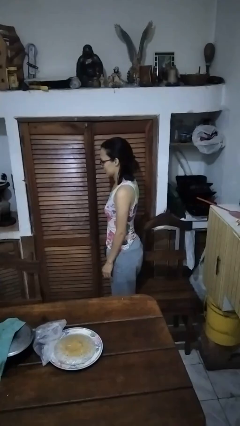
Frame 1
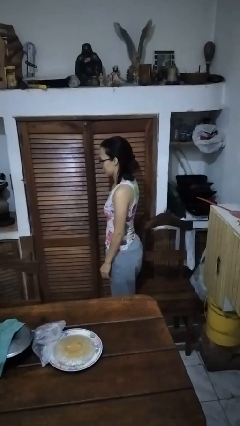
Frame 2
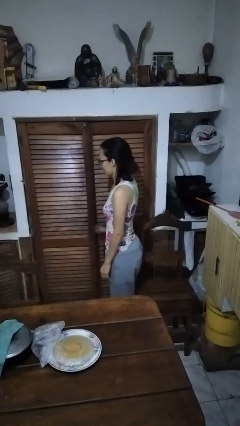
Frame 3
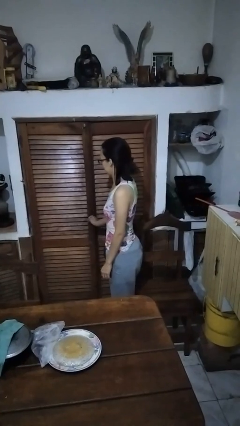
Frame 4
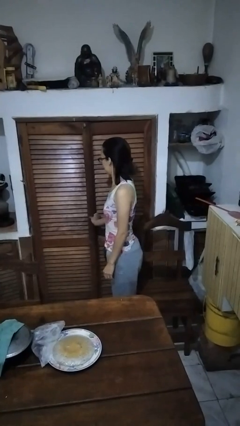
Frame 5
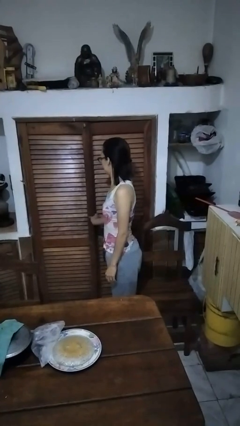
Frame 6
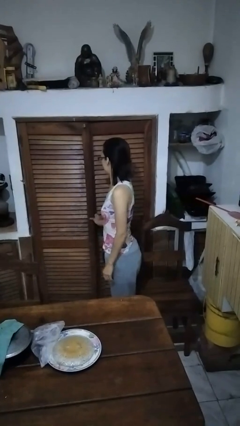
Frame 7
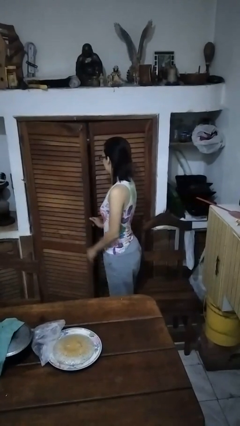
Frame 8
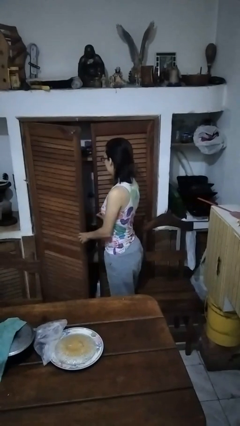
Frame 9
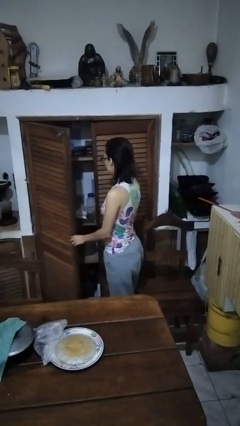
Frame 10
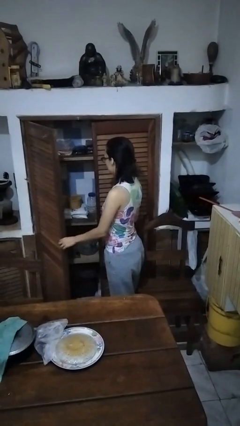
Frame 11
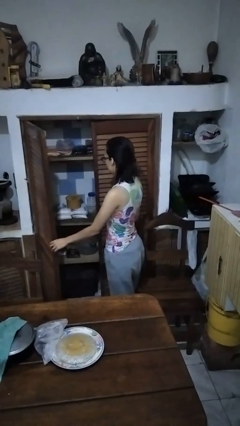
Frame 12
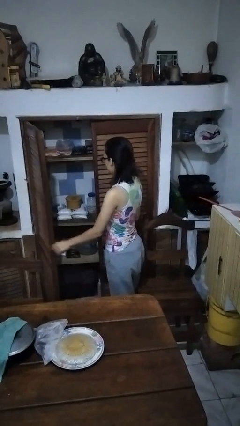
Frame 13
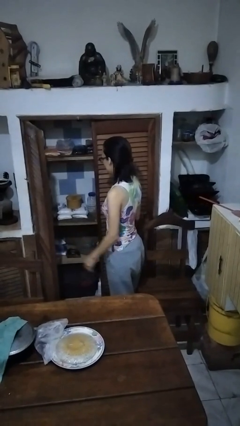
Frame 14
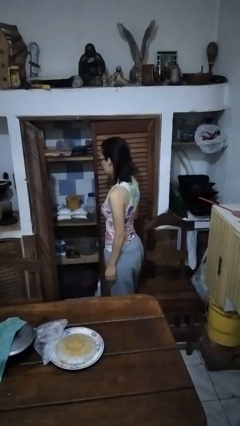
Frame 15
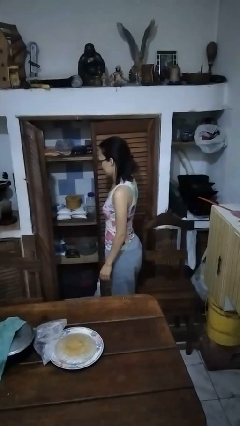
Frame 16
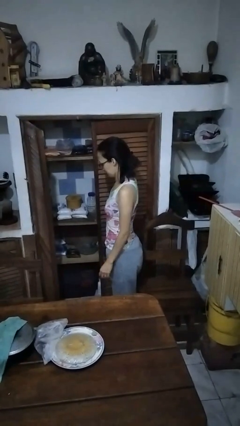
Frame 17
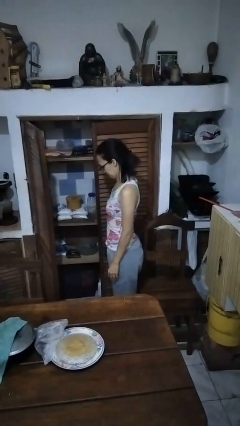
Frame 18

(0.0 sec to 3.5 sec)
person opens cabinet

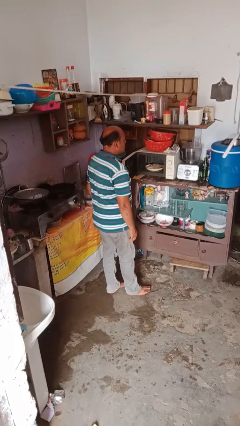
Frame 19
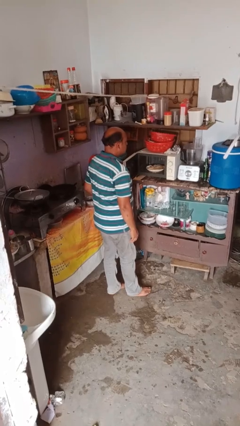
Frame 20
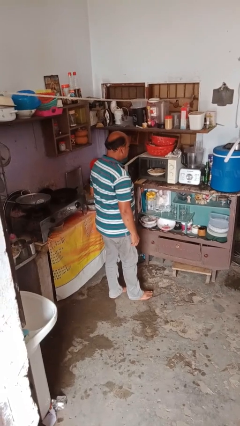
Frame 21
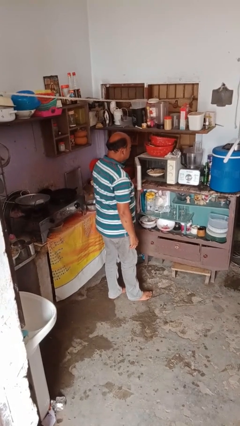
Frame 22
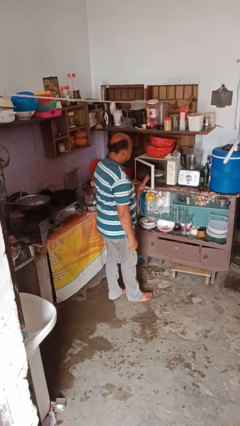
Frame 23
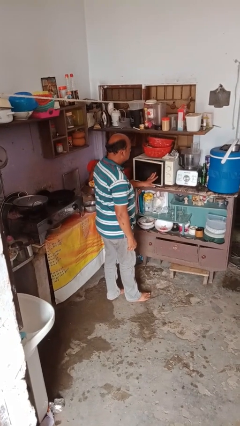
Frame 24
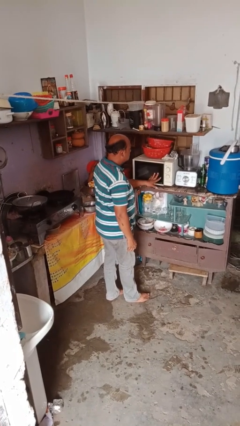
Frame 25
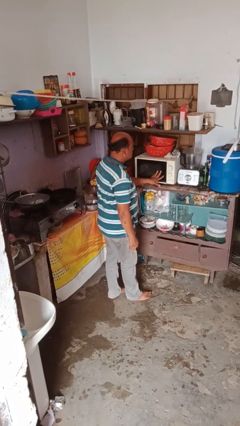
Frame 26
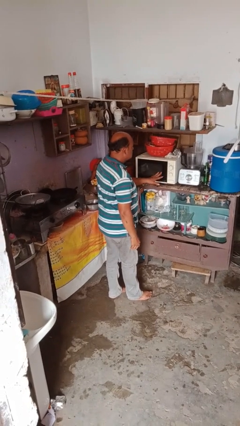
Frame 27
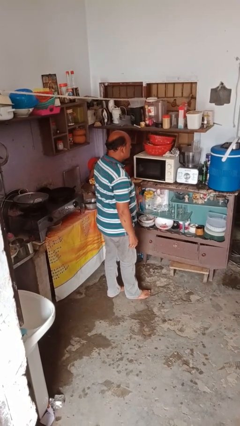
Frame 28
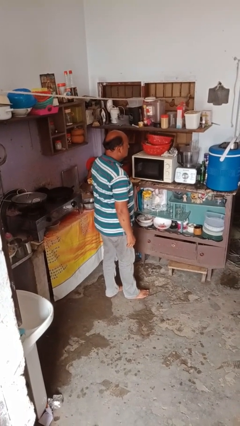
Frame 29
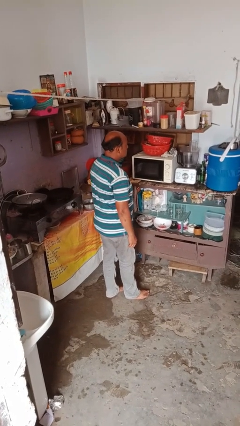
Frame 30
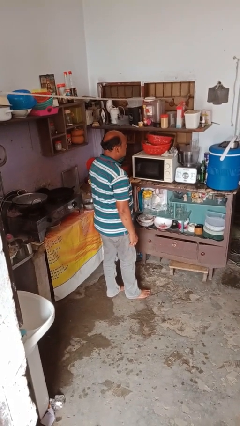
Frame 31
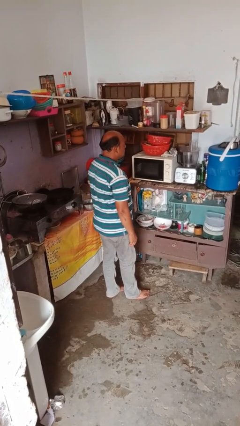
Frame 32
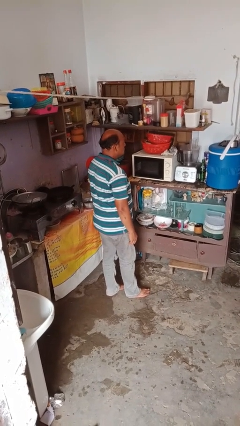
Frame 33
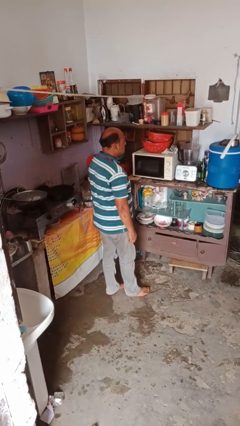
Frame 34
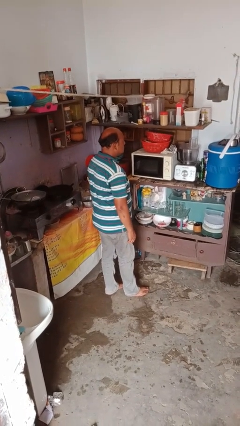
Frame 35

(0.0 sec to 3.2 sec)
person closes microwave

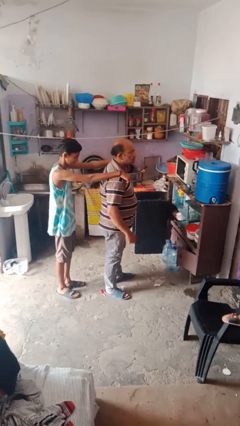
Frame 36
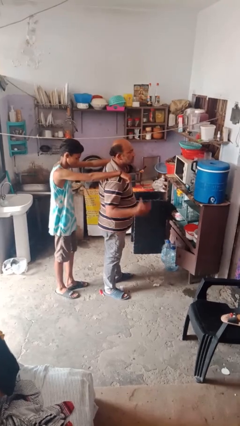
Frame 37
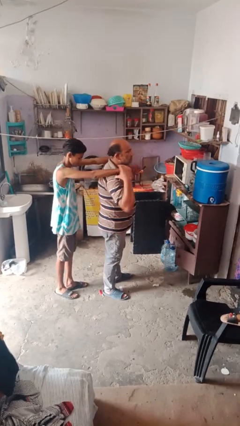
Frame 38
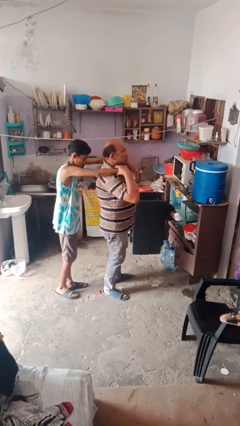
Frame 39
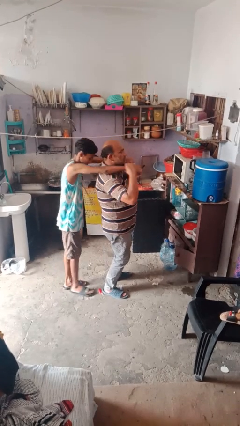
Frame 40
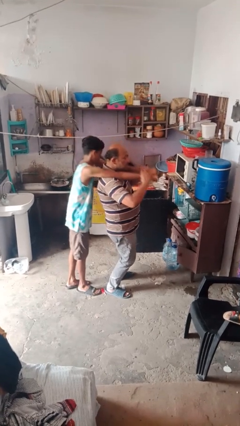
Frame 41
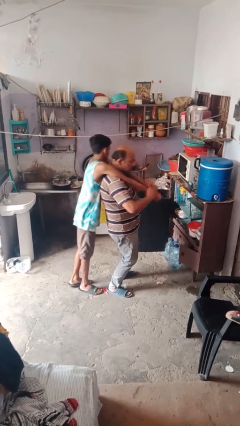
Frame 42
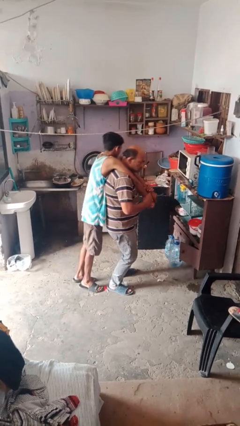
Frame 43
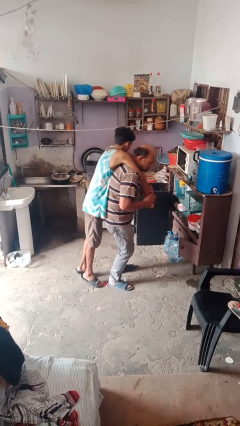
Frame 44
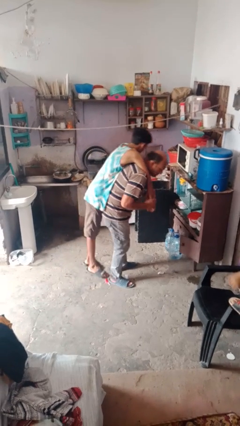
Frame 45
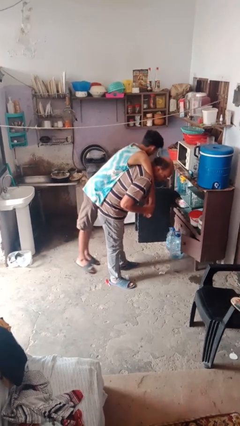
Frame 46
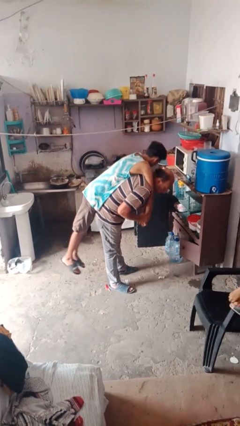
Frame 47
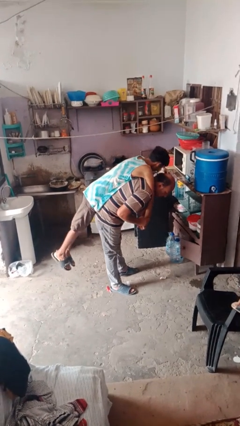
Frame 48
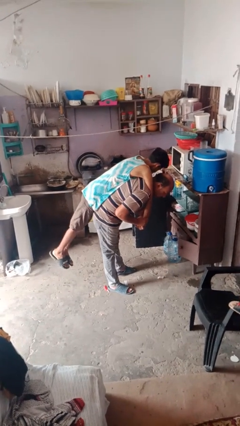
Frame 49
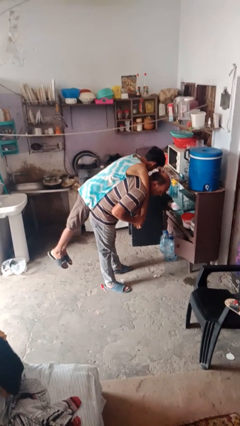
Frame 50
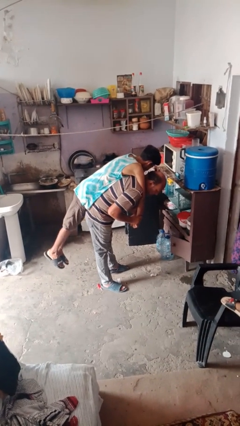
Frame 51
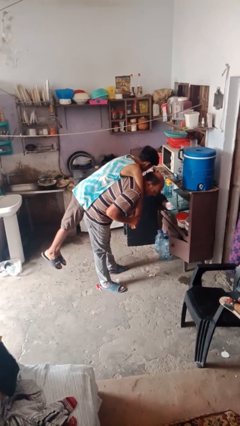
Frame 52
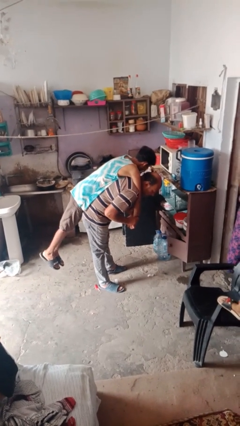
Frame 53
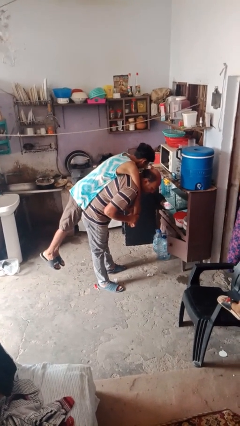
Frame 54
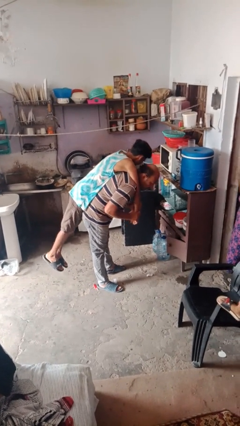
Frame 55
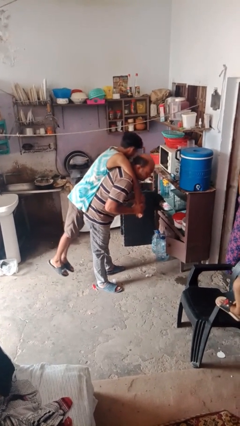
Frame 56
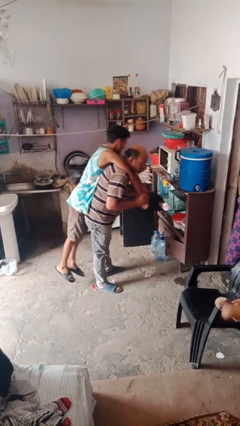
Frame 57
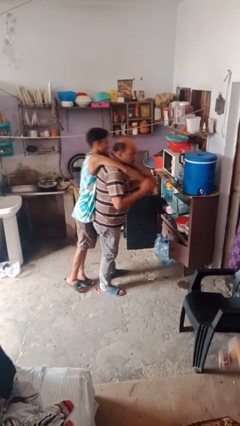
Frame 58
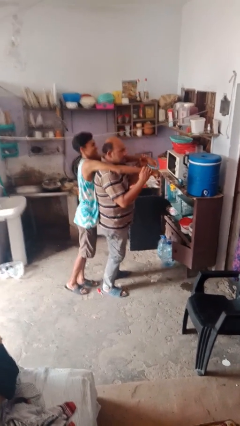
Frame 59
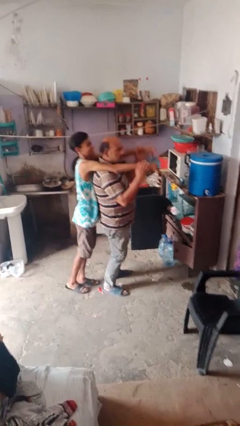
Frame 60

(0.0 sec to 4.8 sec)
person carries person over shoulder

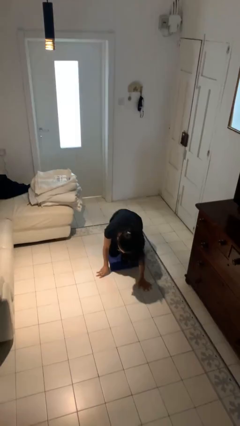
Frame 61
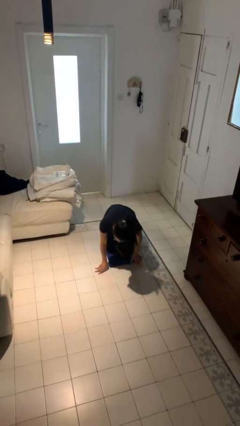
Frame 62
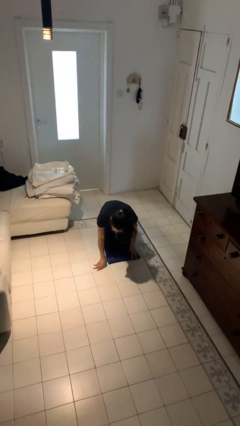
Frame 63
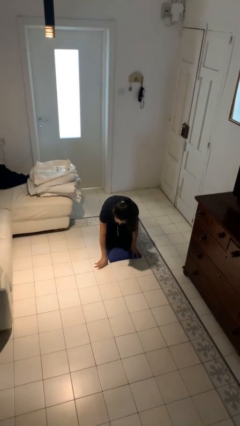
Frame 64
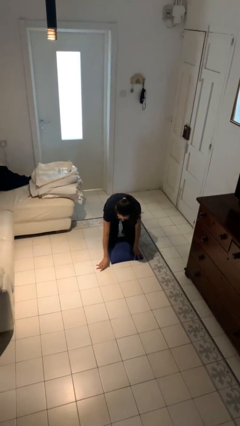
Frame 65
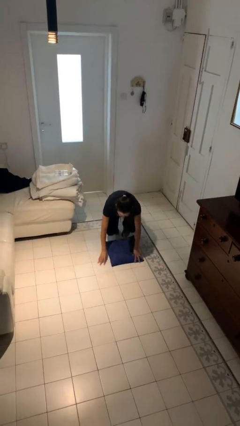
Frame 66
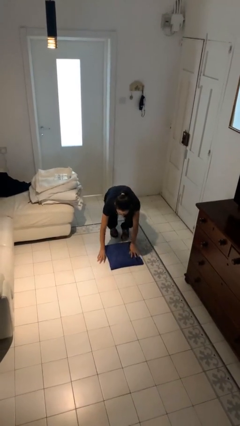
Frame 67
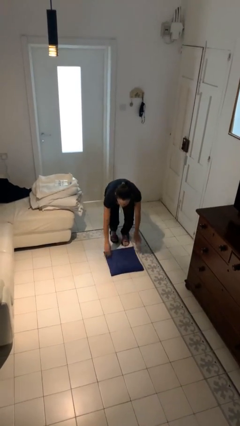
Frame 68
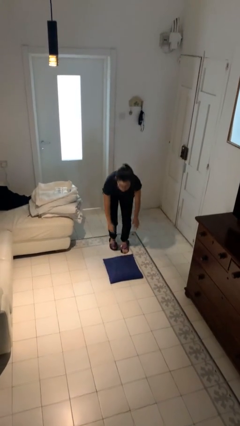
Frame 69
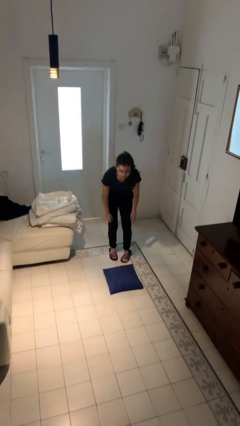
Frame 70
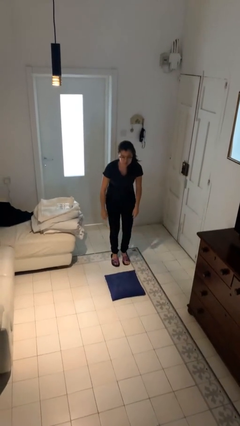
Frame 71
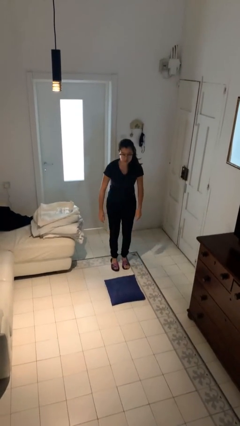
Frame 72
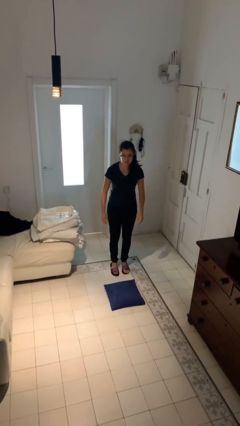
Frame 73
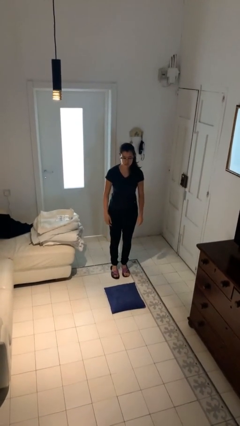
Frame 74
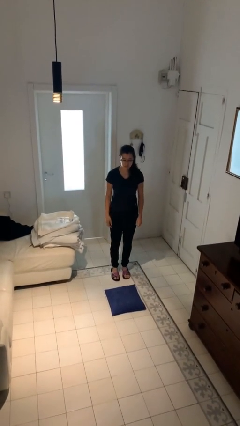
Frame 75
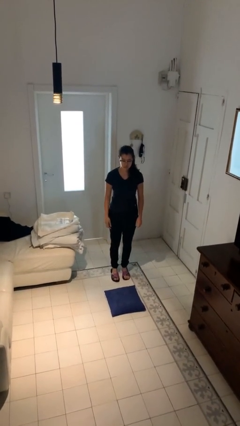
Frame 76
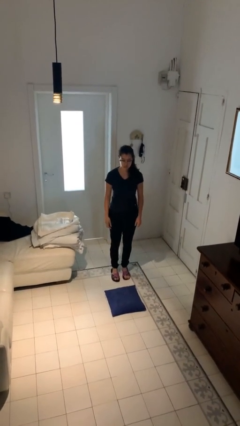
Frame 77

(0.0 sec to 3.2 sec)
person lies down on floor

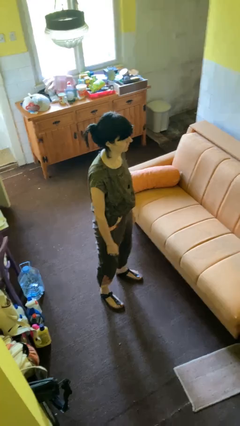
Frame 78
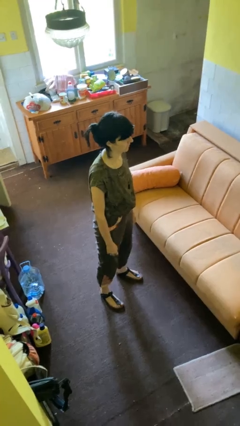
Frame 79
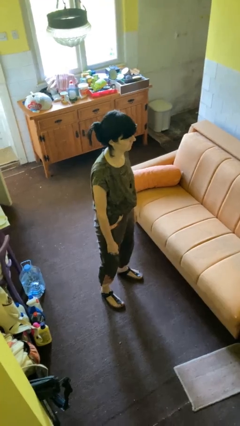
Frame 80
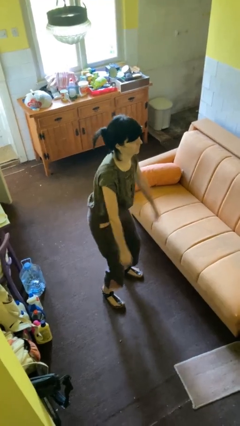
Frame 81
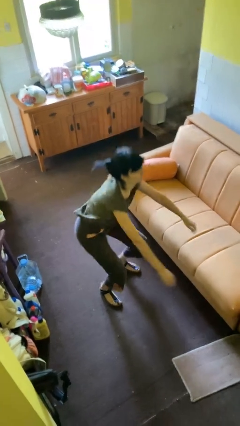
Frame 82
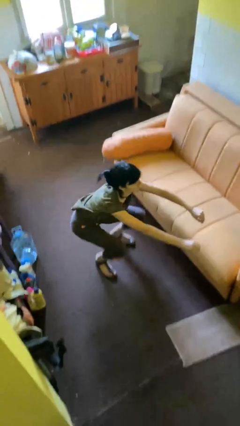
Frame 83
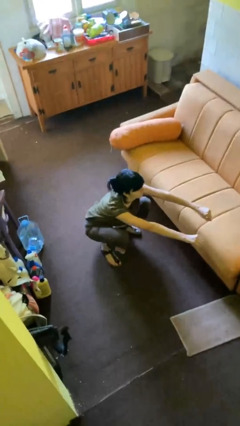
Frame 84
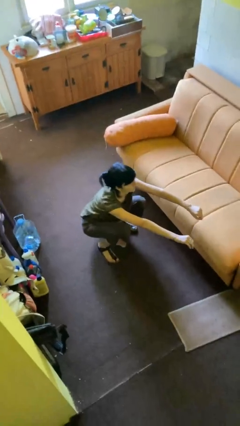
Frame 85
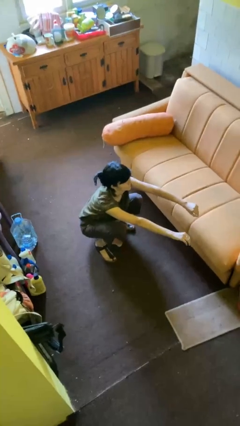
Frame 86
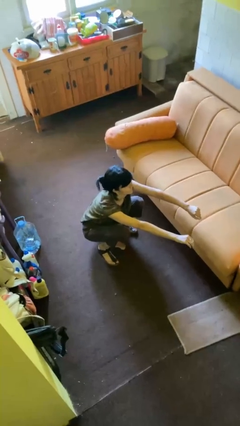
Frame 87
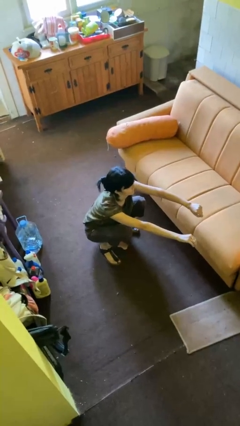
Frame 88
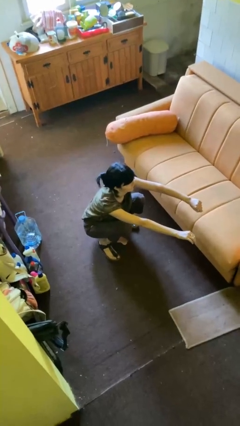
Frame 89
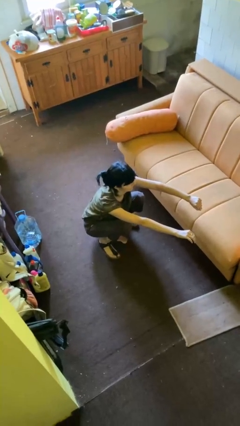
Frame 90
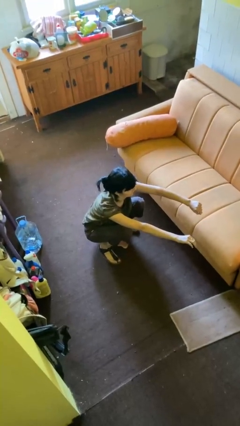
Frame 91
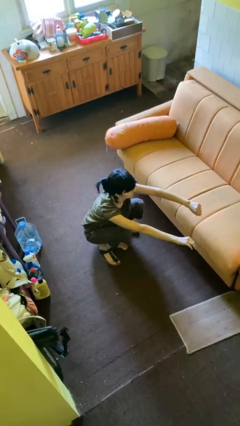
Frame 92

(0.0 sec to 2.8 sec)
person squats

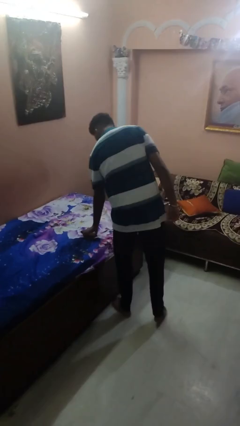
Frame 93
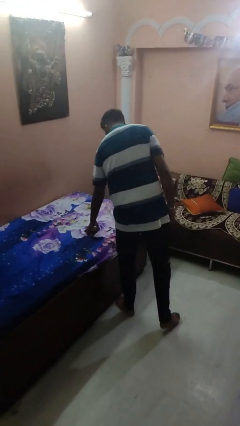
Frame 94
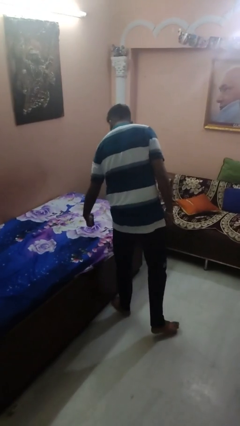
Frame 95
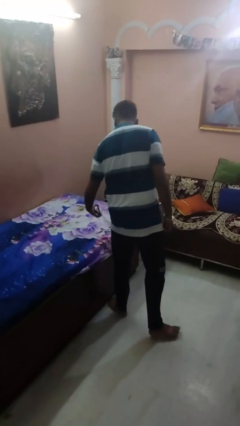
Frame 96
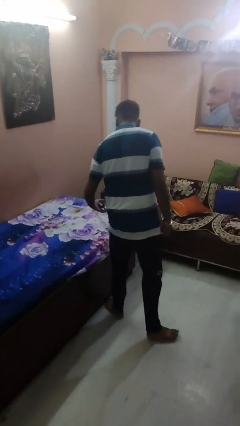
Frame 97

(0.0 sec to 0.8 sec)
person picks up object from bed
